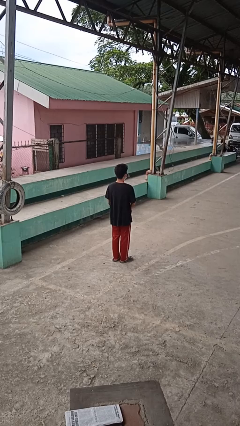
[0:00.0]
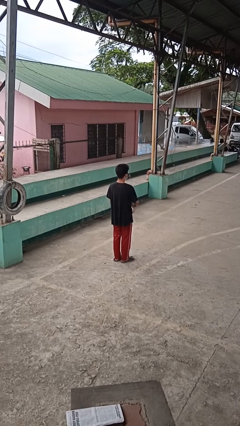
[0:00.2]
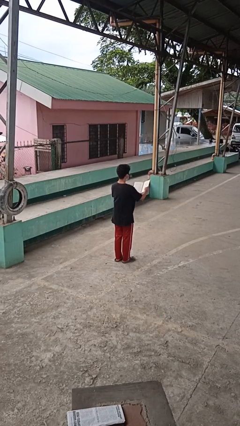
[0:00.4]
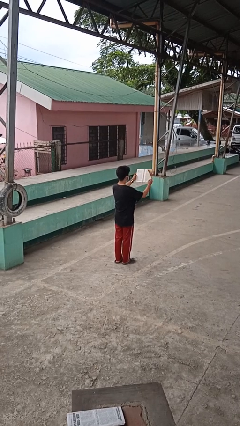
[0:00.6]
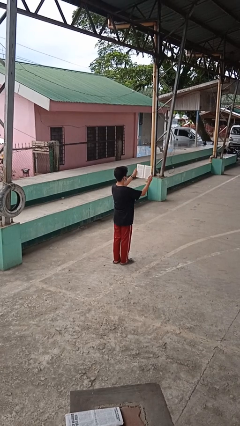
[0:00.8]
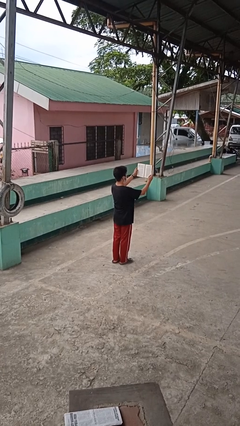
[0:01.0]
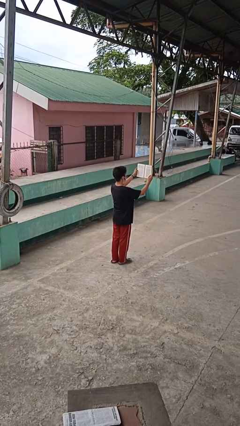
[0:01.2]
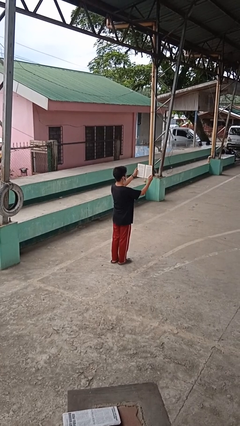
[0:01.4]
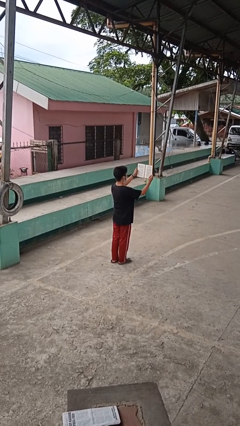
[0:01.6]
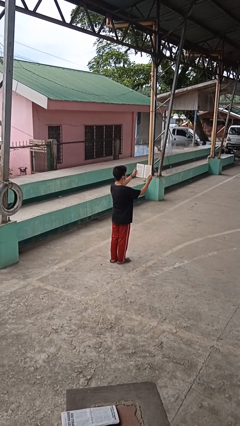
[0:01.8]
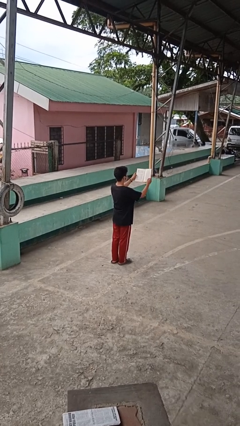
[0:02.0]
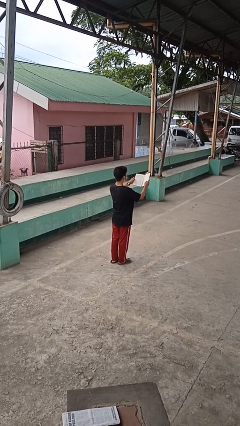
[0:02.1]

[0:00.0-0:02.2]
person reads book

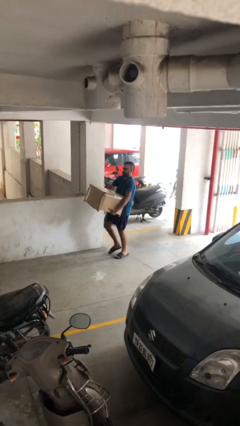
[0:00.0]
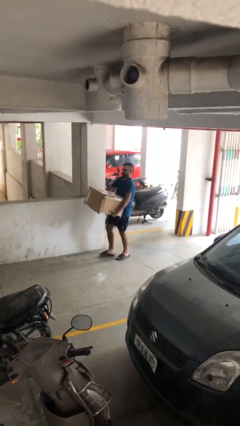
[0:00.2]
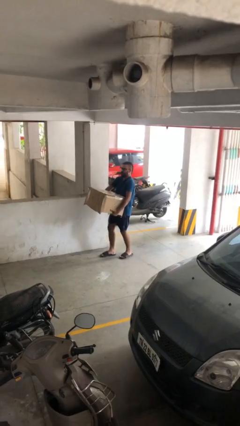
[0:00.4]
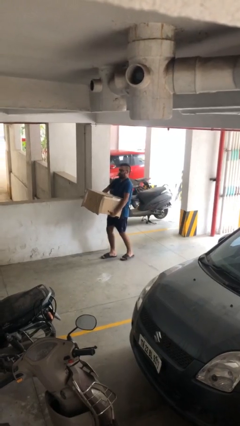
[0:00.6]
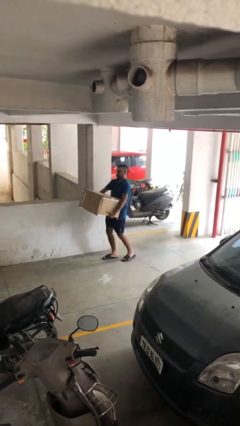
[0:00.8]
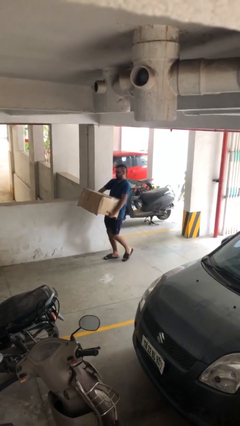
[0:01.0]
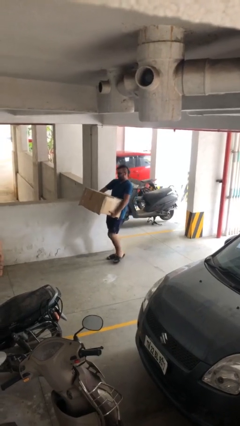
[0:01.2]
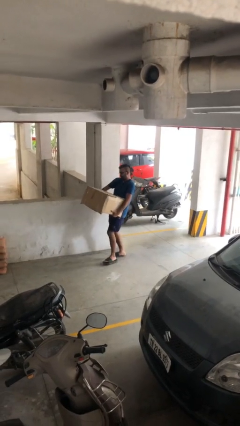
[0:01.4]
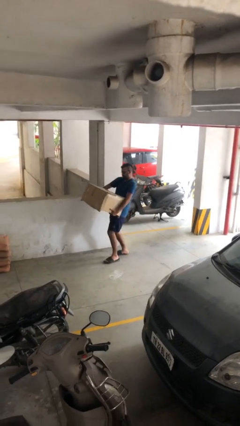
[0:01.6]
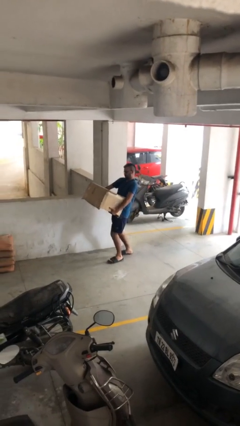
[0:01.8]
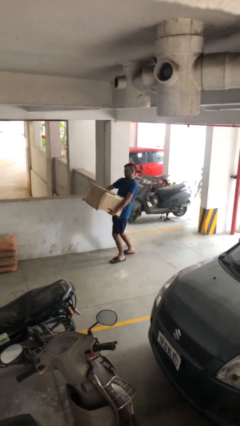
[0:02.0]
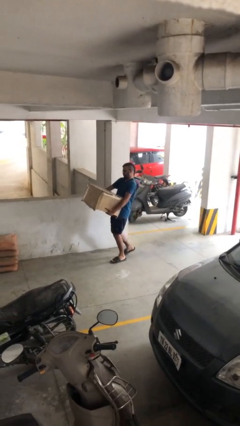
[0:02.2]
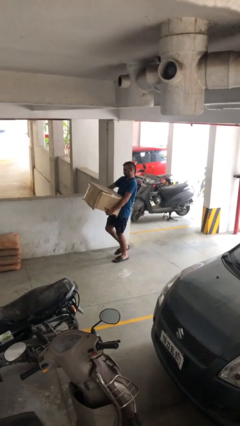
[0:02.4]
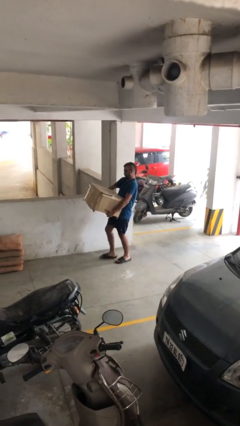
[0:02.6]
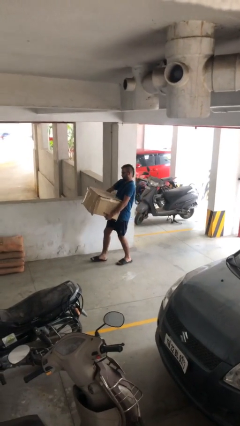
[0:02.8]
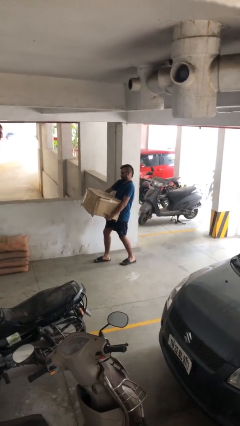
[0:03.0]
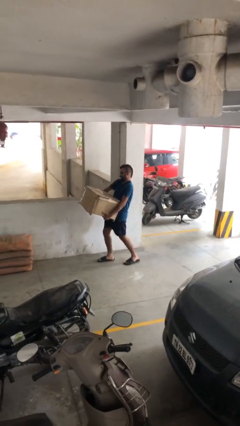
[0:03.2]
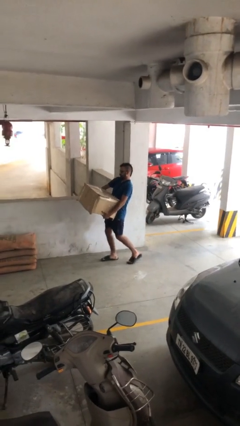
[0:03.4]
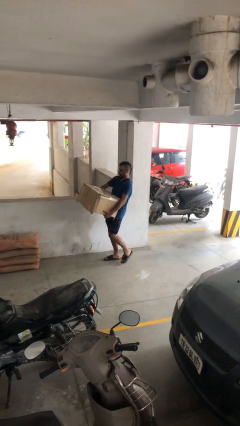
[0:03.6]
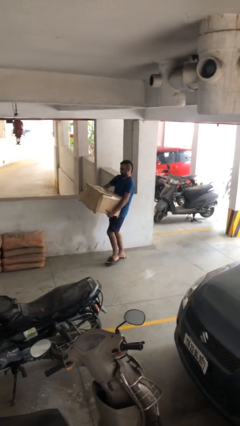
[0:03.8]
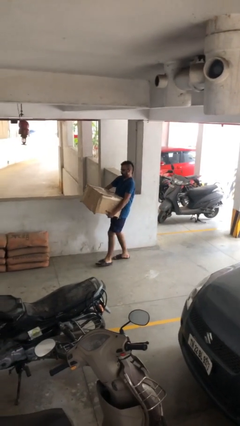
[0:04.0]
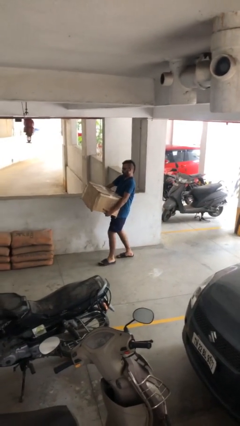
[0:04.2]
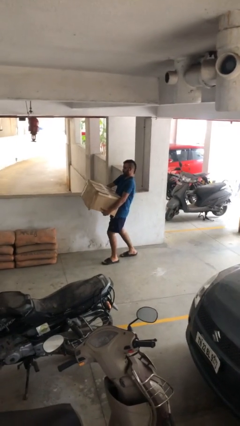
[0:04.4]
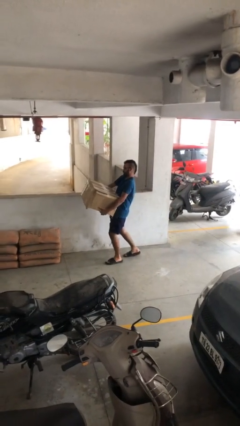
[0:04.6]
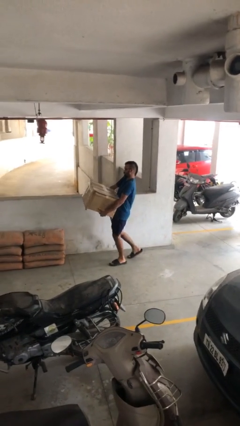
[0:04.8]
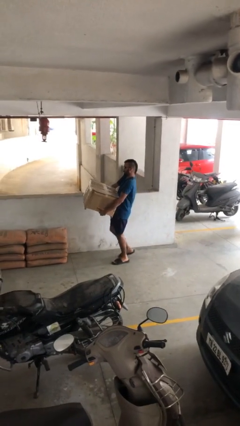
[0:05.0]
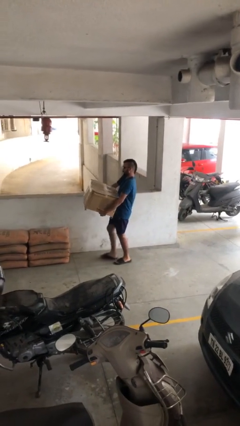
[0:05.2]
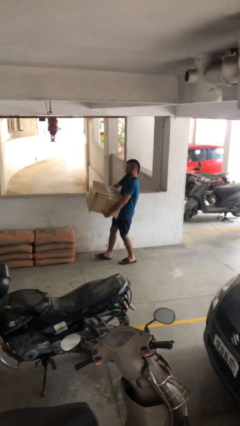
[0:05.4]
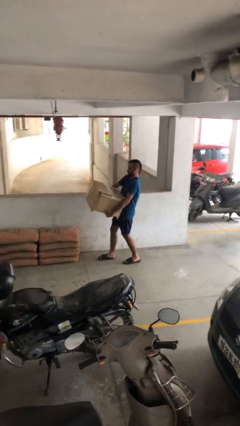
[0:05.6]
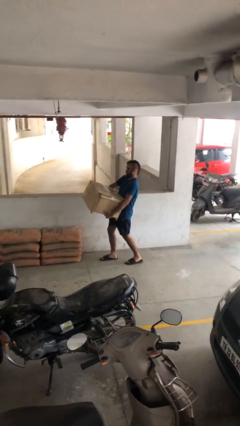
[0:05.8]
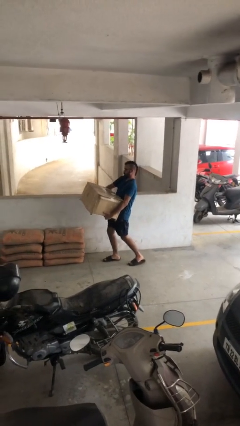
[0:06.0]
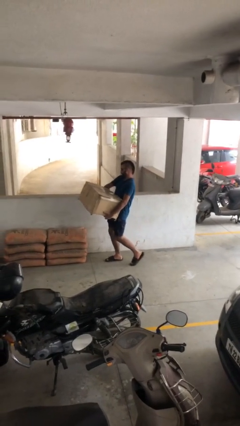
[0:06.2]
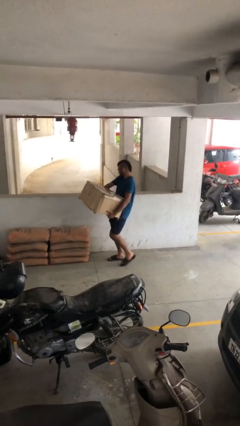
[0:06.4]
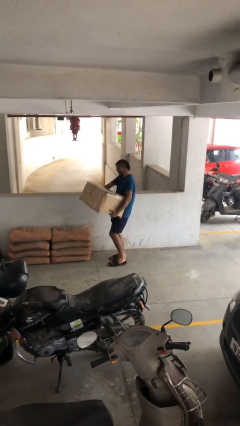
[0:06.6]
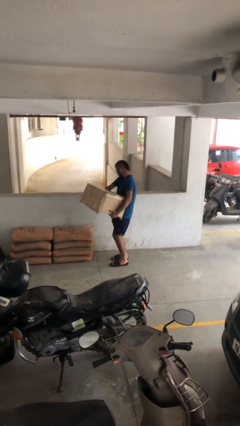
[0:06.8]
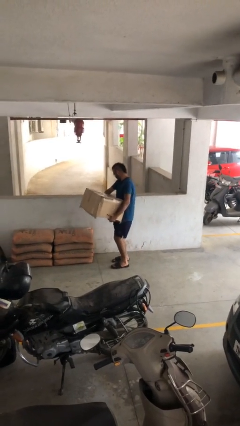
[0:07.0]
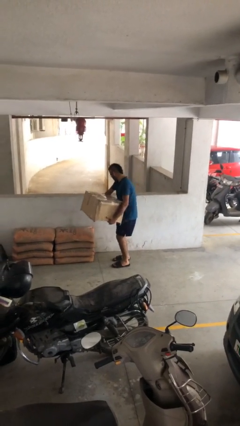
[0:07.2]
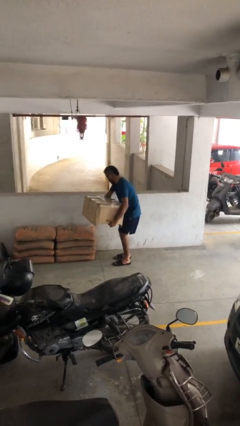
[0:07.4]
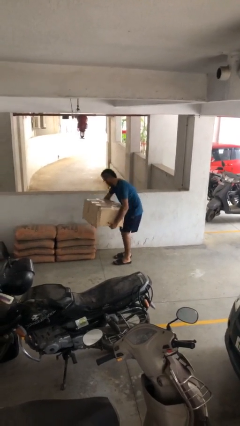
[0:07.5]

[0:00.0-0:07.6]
person carries heavy object

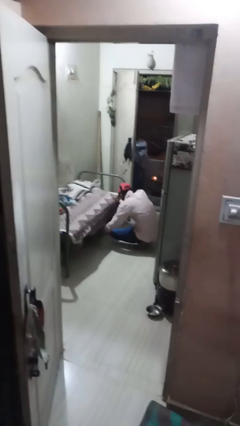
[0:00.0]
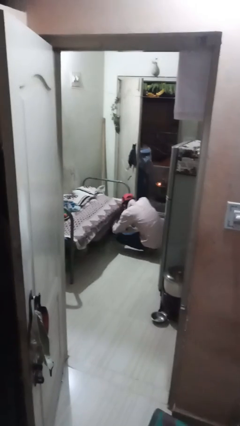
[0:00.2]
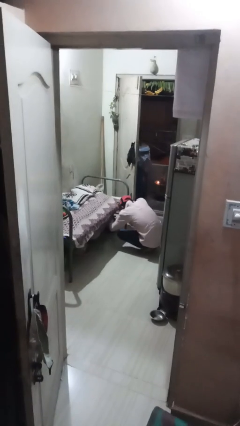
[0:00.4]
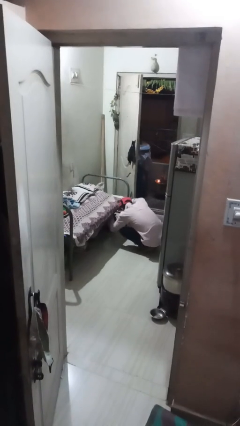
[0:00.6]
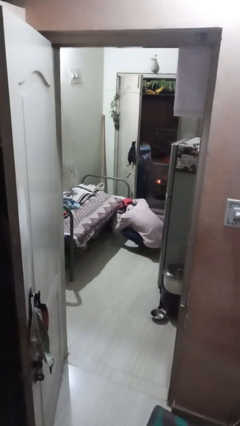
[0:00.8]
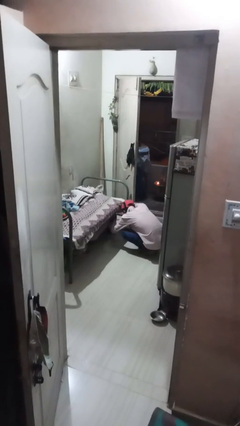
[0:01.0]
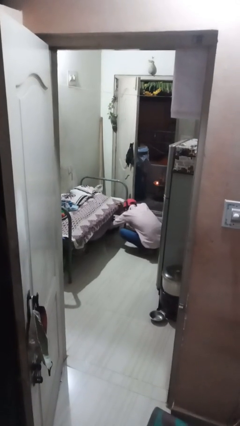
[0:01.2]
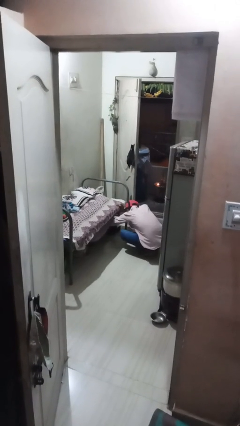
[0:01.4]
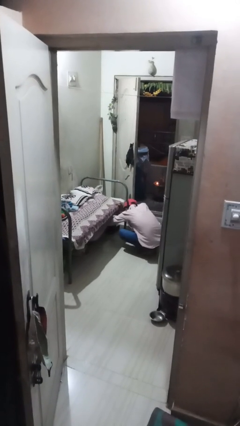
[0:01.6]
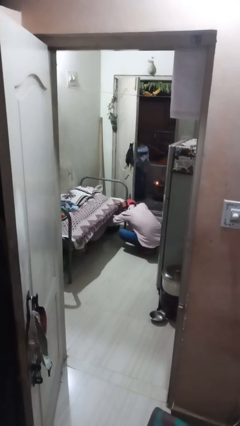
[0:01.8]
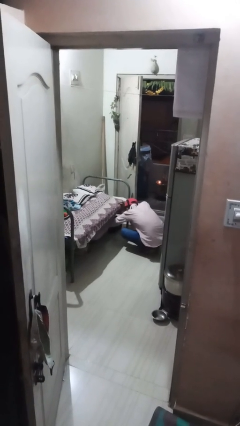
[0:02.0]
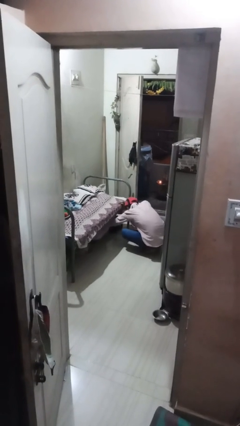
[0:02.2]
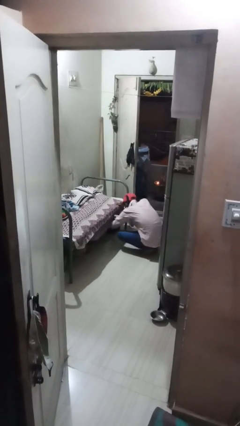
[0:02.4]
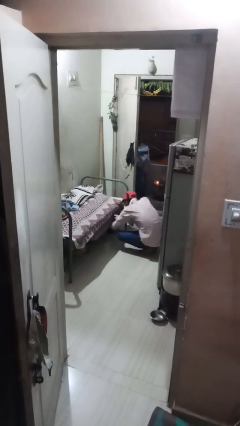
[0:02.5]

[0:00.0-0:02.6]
person searches under bed

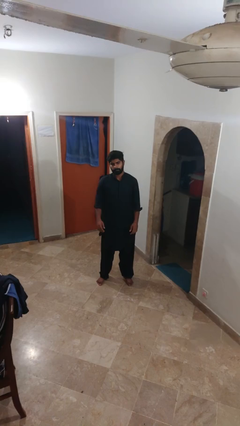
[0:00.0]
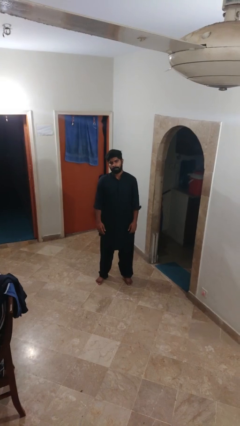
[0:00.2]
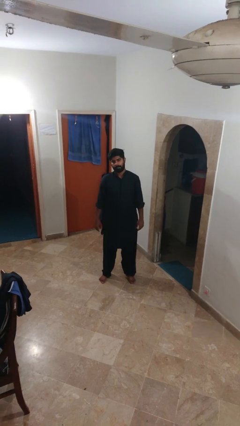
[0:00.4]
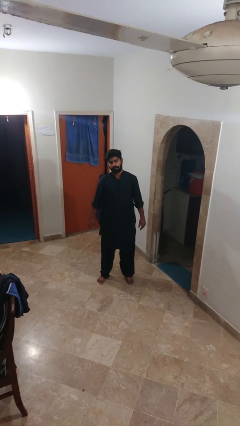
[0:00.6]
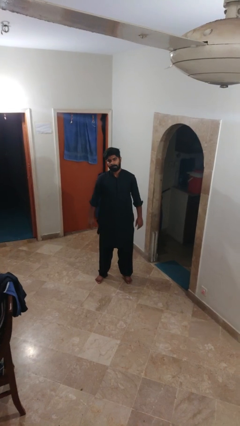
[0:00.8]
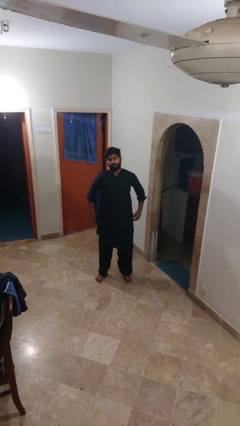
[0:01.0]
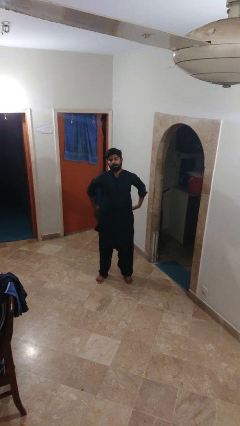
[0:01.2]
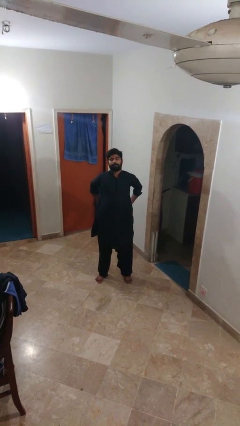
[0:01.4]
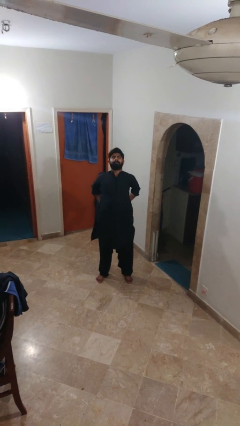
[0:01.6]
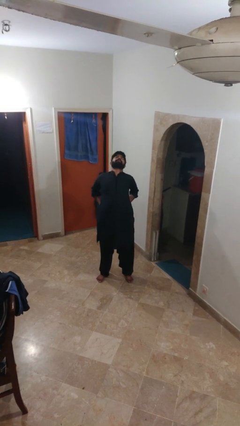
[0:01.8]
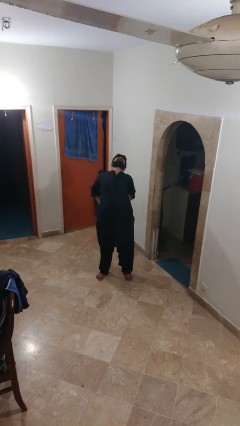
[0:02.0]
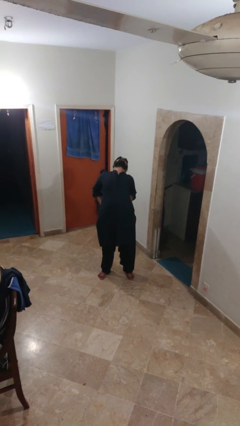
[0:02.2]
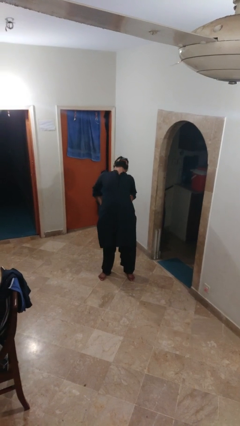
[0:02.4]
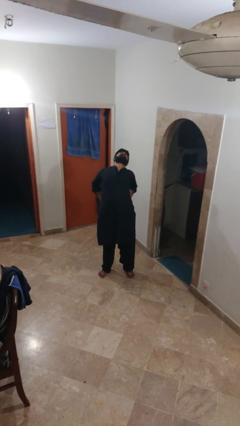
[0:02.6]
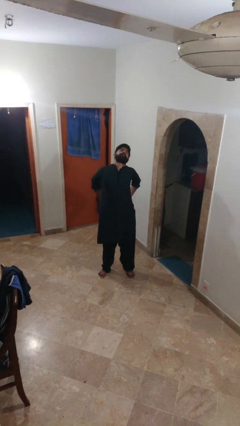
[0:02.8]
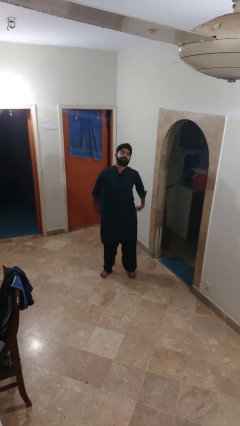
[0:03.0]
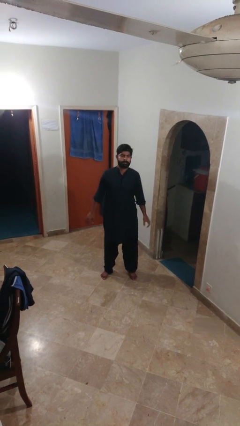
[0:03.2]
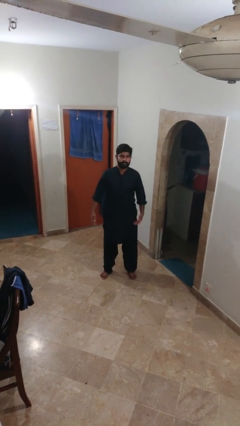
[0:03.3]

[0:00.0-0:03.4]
person stretches back

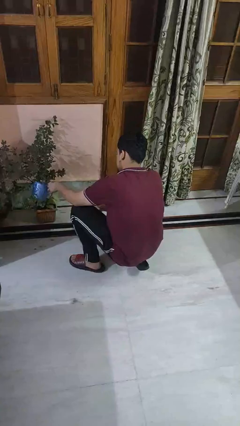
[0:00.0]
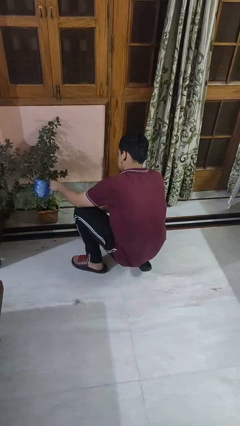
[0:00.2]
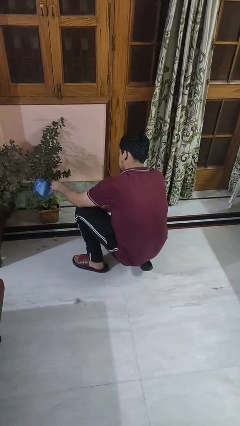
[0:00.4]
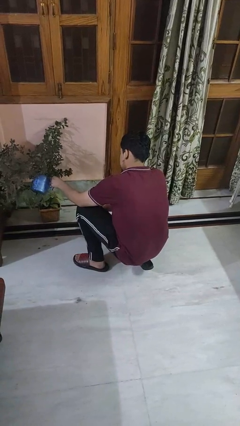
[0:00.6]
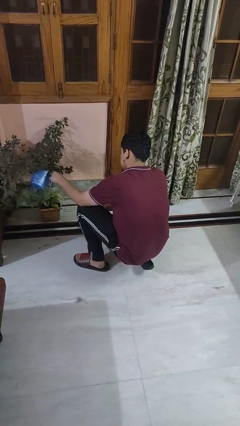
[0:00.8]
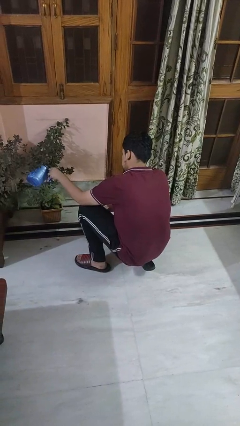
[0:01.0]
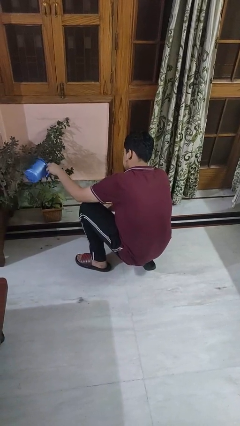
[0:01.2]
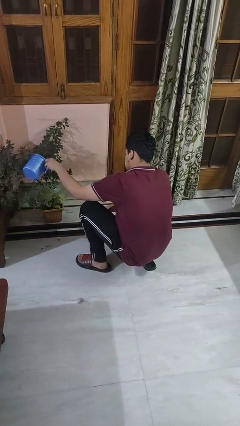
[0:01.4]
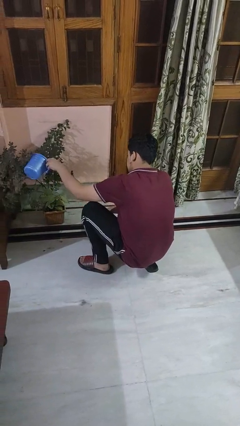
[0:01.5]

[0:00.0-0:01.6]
person waters houseplant
